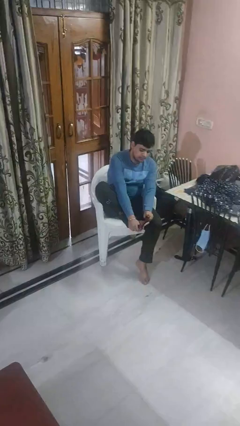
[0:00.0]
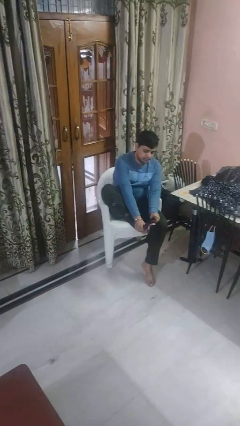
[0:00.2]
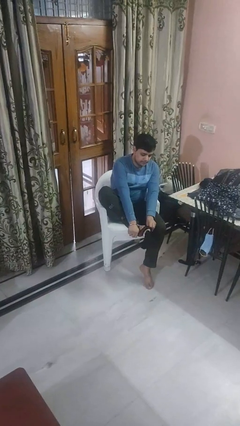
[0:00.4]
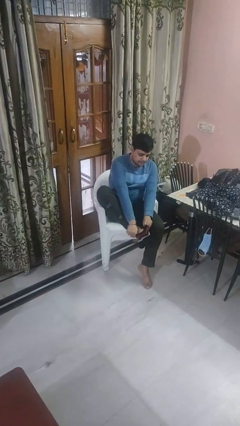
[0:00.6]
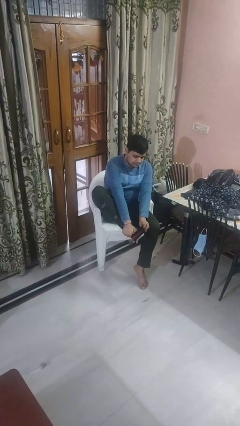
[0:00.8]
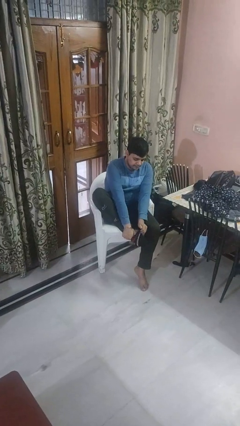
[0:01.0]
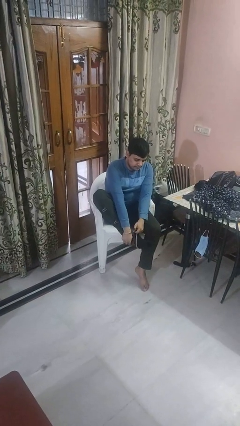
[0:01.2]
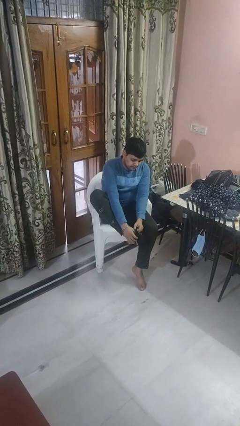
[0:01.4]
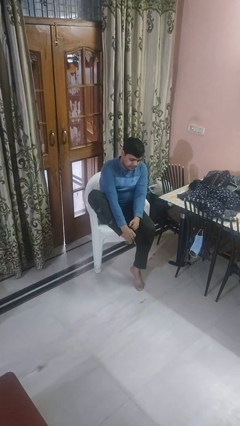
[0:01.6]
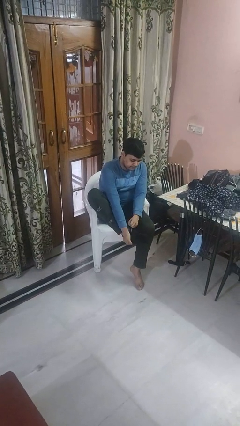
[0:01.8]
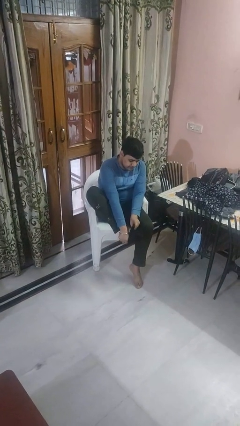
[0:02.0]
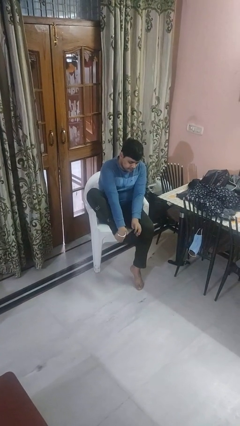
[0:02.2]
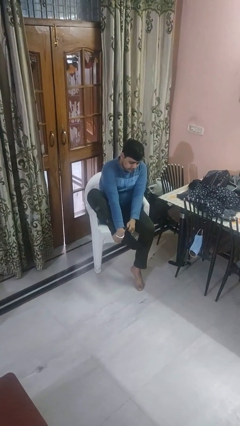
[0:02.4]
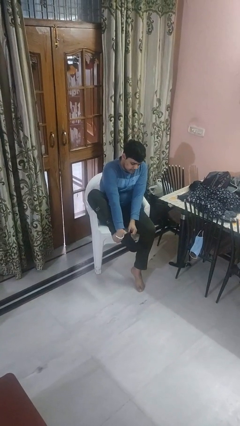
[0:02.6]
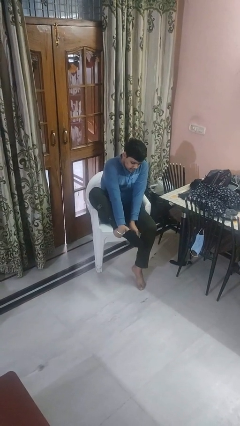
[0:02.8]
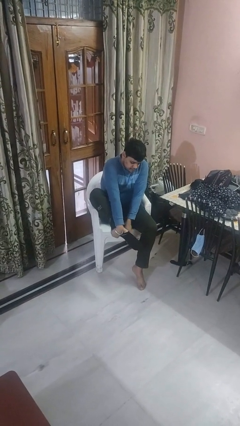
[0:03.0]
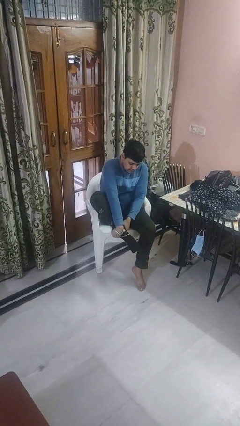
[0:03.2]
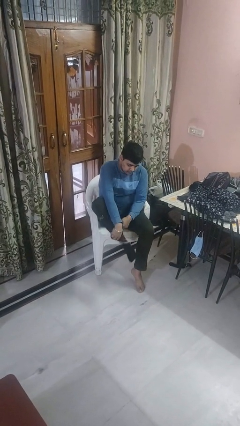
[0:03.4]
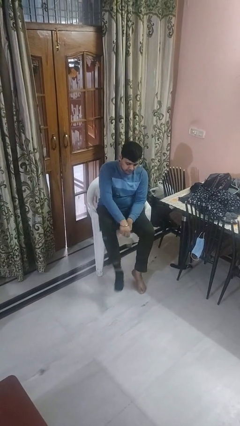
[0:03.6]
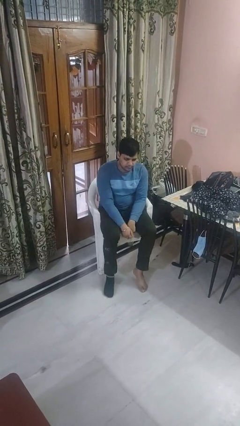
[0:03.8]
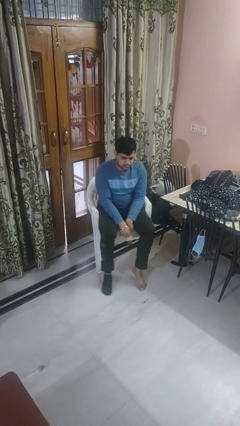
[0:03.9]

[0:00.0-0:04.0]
person puts on socks

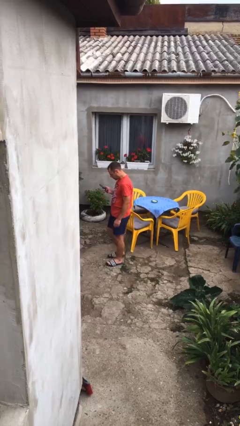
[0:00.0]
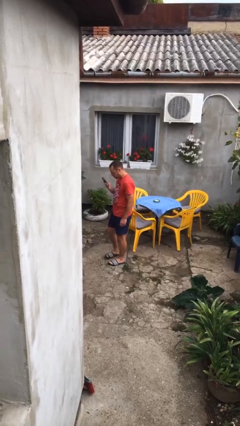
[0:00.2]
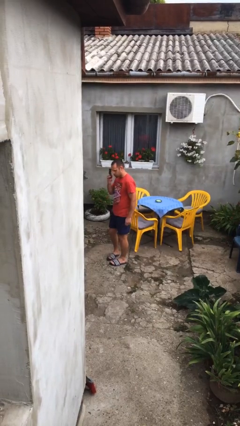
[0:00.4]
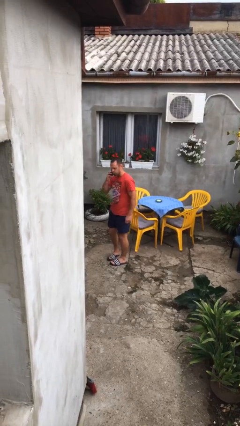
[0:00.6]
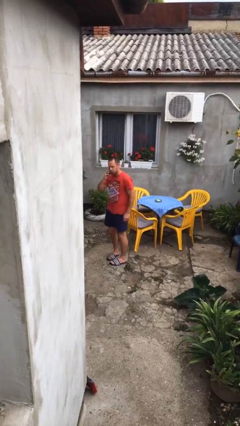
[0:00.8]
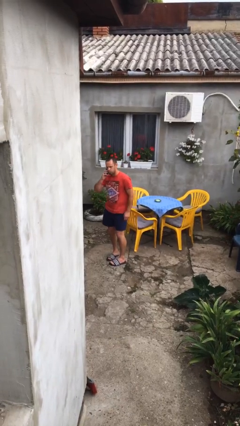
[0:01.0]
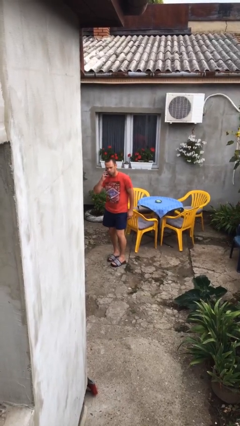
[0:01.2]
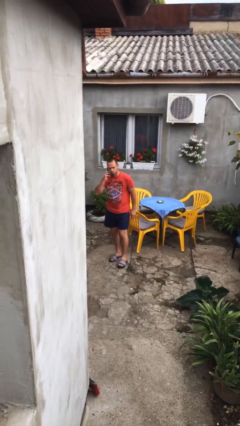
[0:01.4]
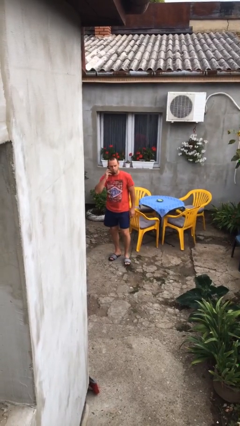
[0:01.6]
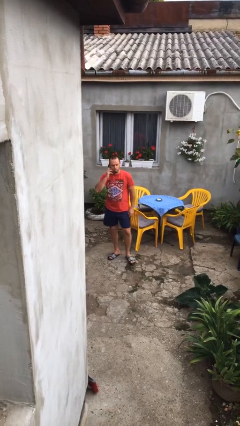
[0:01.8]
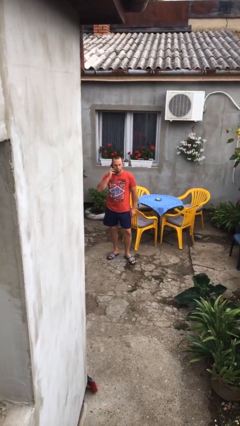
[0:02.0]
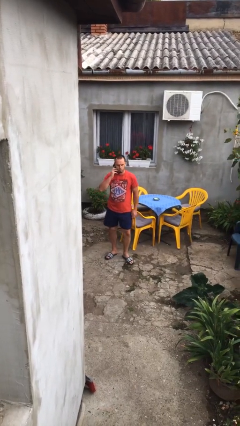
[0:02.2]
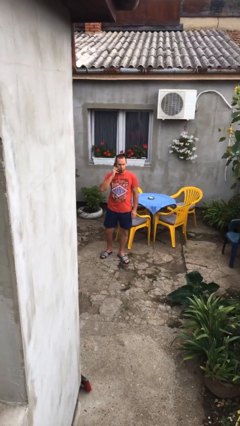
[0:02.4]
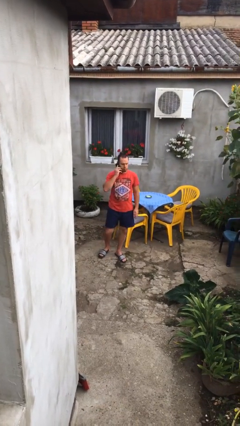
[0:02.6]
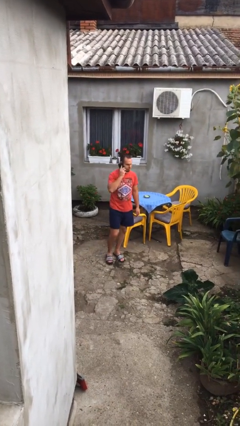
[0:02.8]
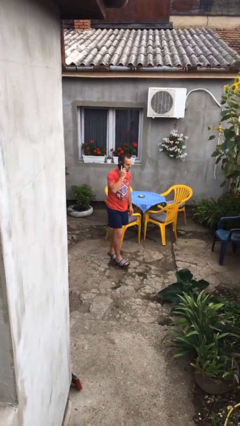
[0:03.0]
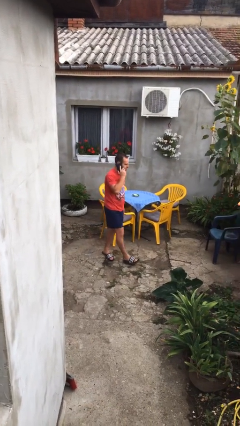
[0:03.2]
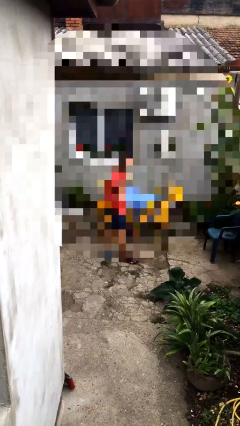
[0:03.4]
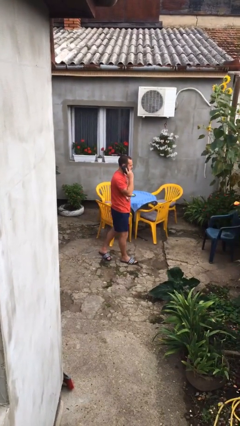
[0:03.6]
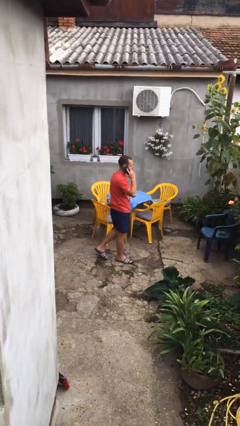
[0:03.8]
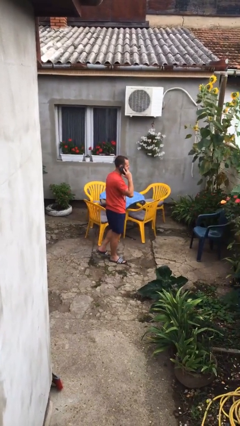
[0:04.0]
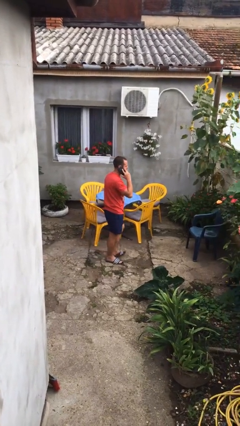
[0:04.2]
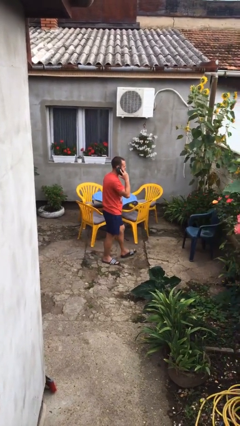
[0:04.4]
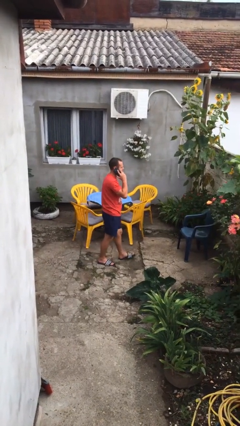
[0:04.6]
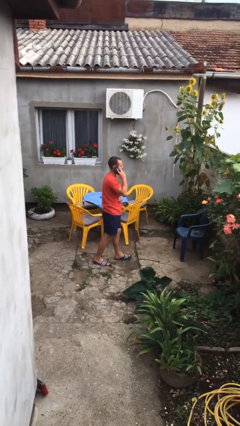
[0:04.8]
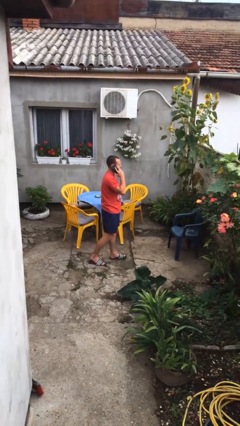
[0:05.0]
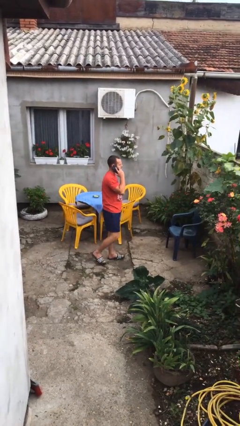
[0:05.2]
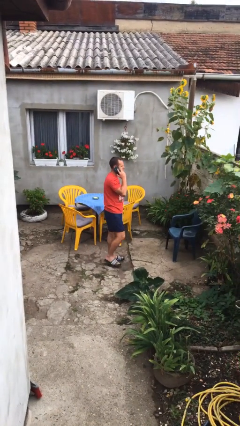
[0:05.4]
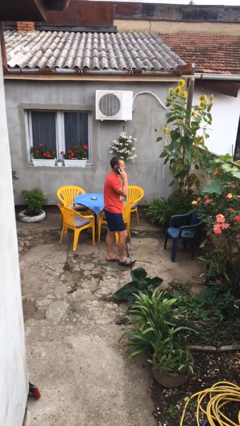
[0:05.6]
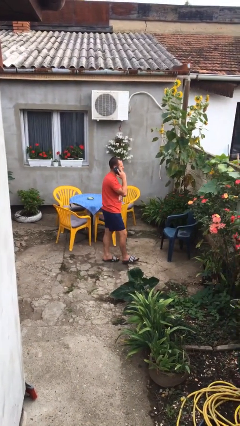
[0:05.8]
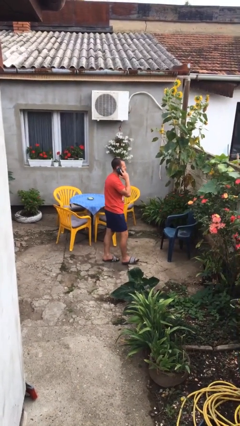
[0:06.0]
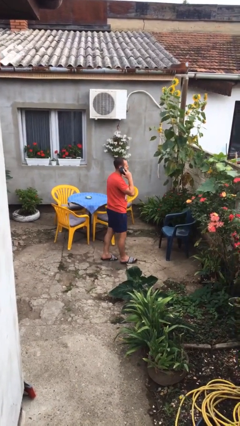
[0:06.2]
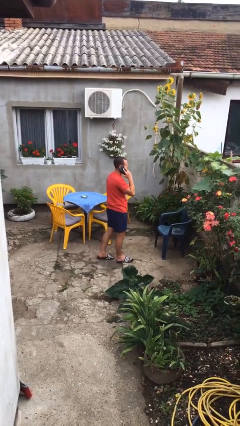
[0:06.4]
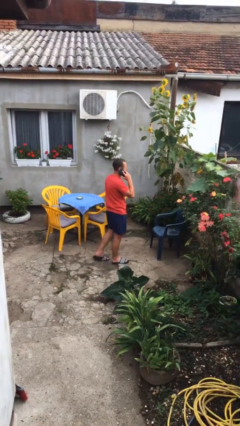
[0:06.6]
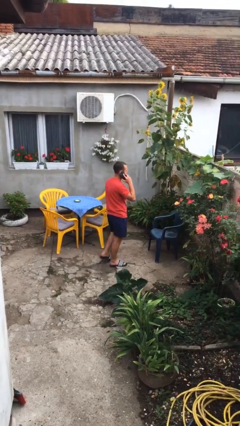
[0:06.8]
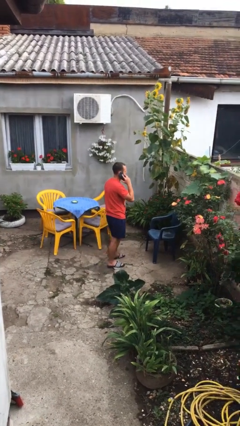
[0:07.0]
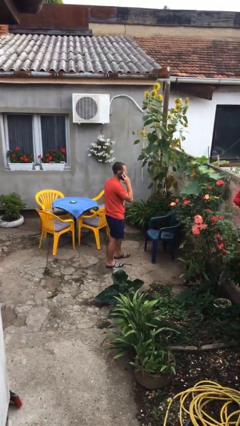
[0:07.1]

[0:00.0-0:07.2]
person talks on phone

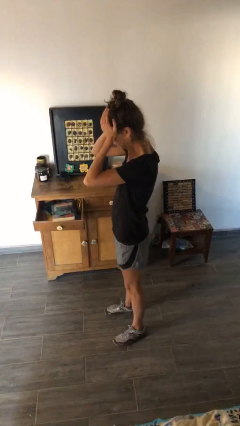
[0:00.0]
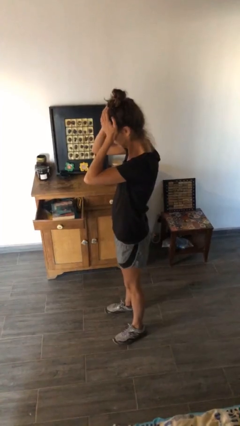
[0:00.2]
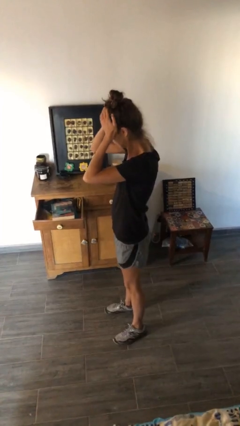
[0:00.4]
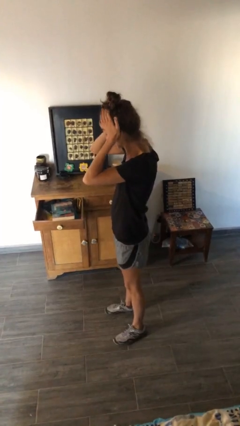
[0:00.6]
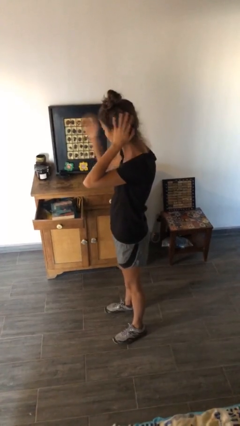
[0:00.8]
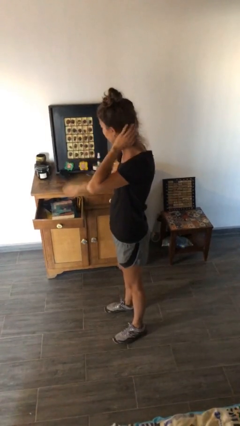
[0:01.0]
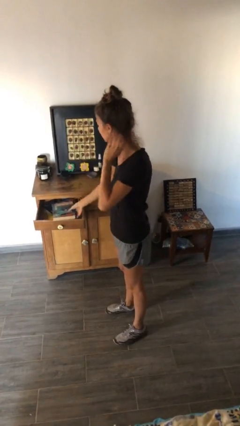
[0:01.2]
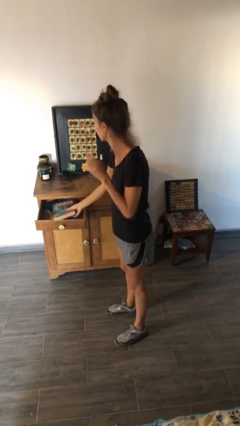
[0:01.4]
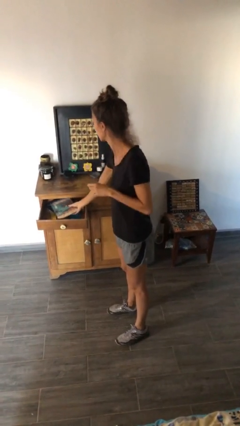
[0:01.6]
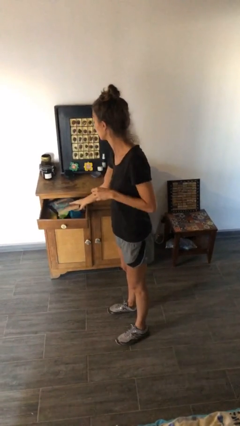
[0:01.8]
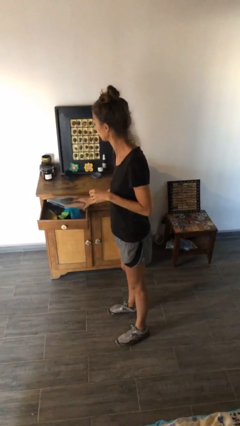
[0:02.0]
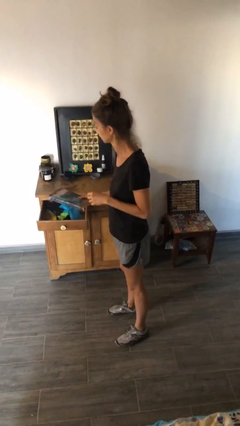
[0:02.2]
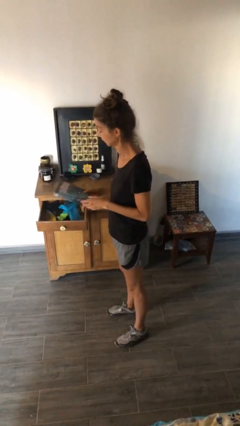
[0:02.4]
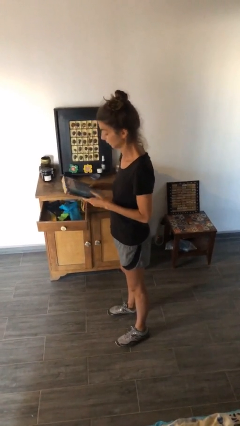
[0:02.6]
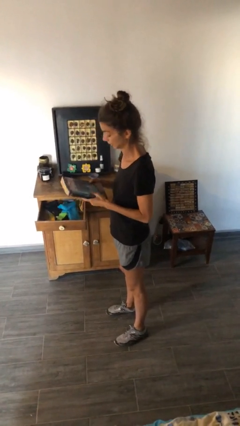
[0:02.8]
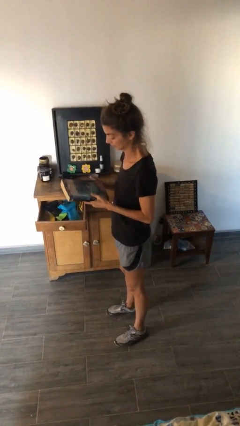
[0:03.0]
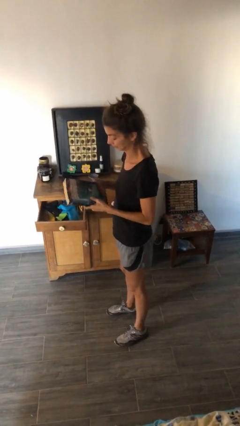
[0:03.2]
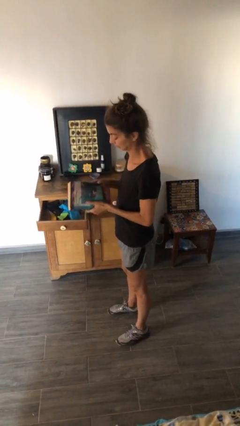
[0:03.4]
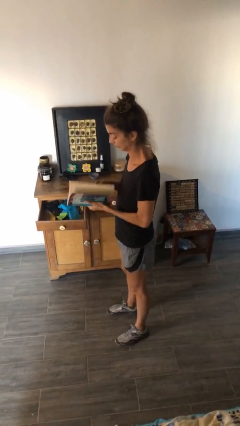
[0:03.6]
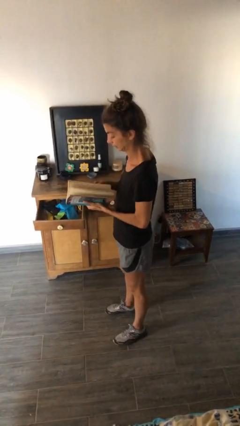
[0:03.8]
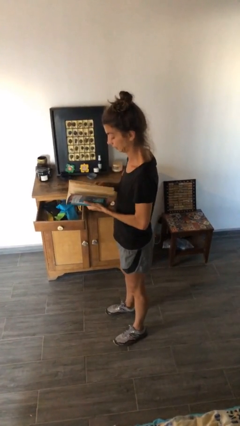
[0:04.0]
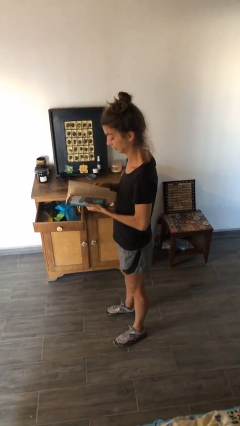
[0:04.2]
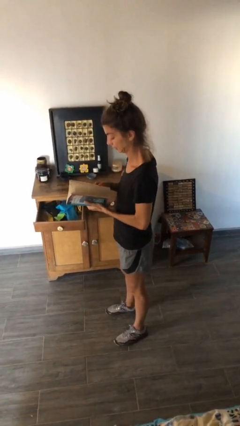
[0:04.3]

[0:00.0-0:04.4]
person picks up object from cabinet

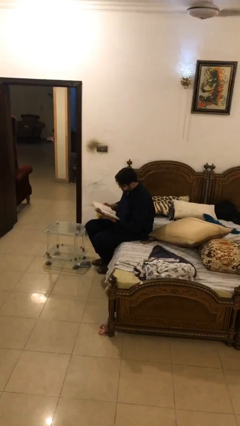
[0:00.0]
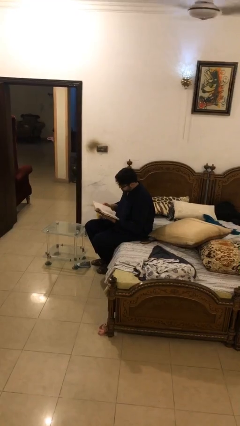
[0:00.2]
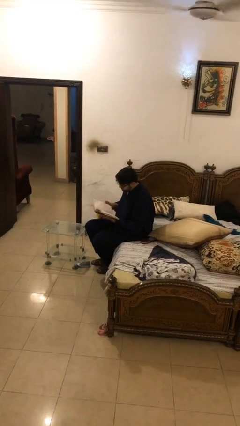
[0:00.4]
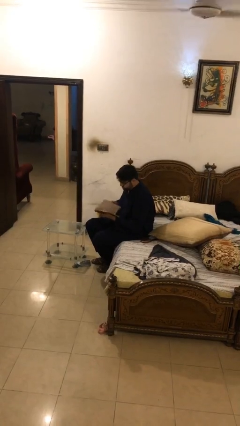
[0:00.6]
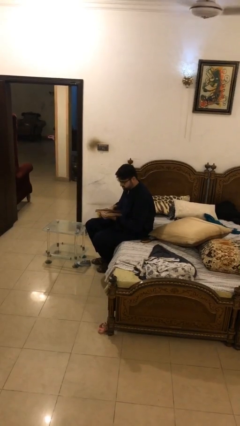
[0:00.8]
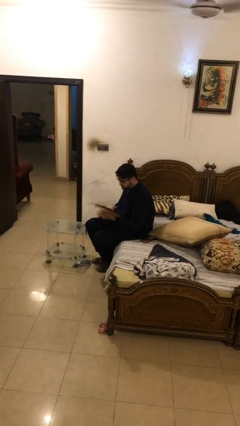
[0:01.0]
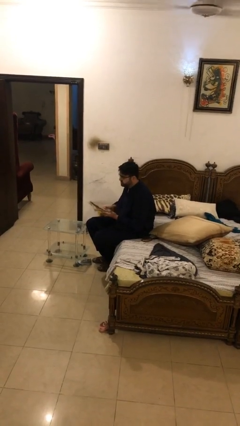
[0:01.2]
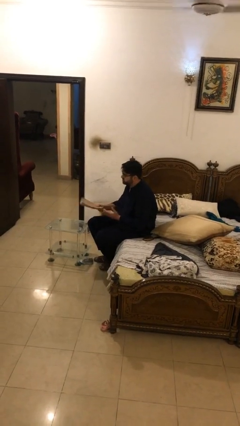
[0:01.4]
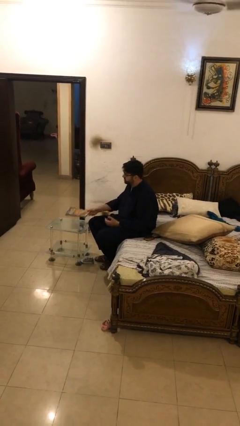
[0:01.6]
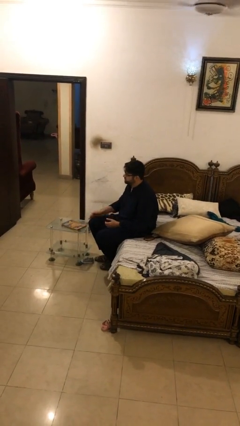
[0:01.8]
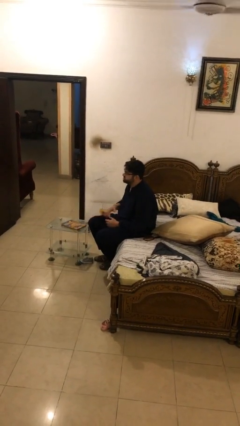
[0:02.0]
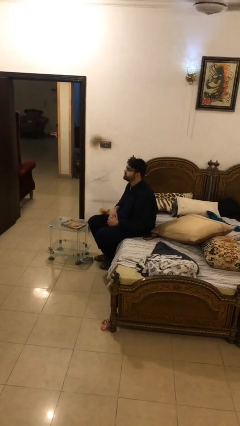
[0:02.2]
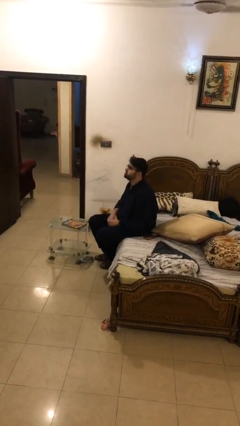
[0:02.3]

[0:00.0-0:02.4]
person puts down object on table
